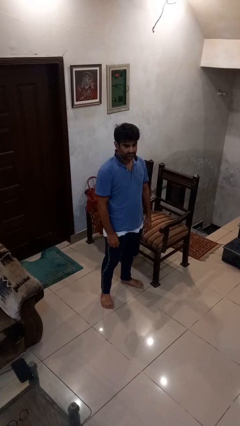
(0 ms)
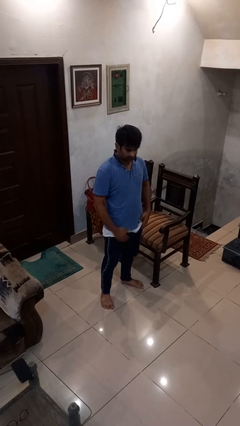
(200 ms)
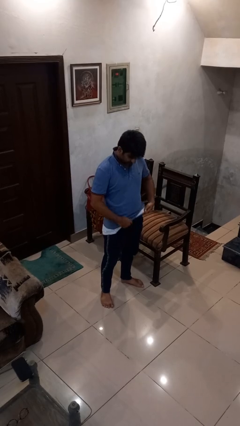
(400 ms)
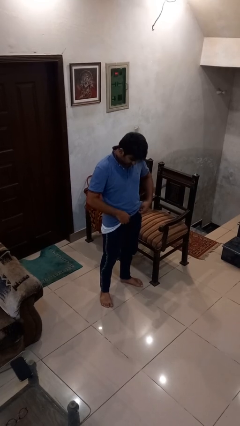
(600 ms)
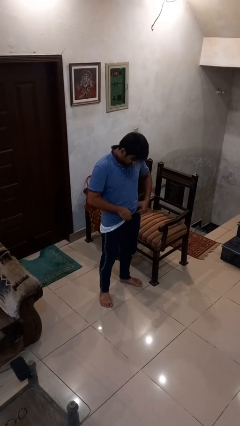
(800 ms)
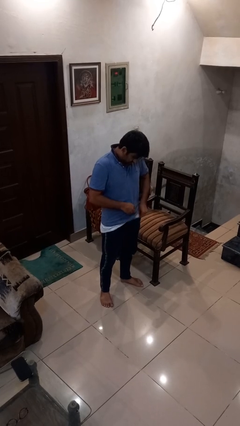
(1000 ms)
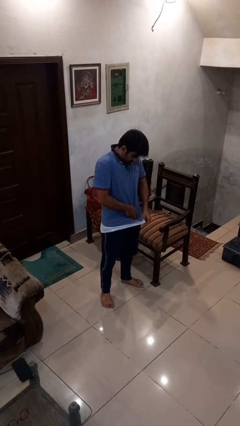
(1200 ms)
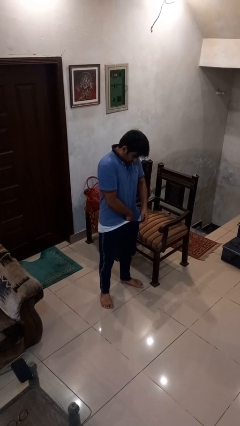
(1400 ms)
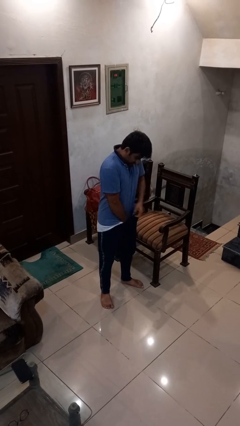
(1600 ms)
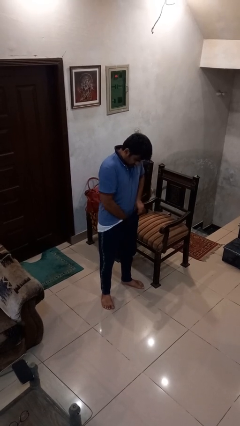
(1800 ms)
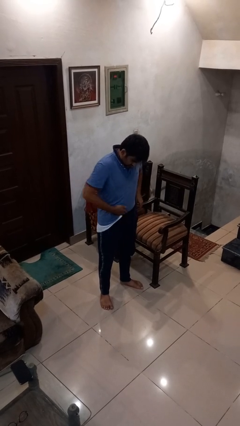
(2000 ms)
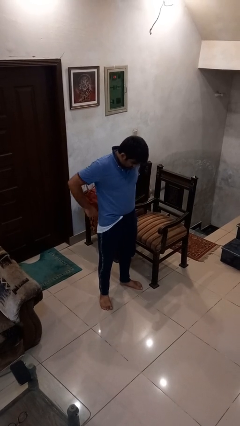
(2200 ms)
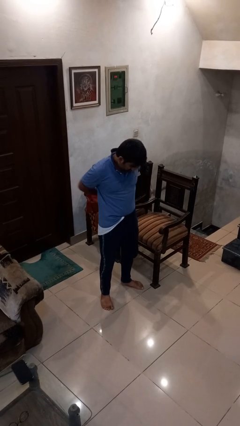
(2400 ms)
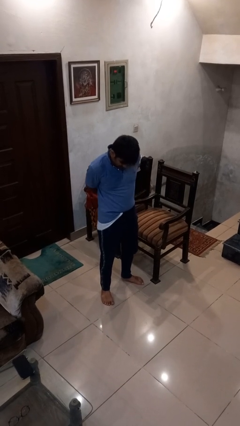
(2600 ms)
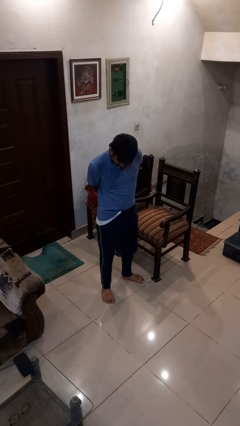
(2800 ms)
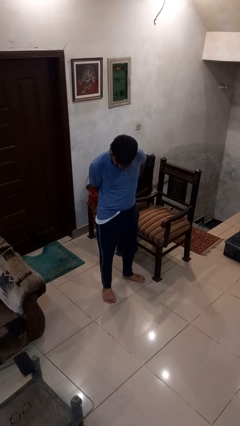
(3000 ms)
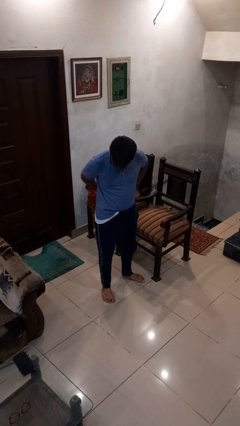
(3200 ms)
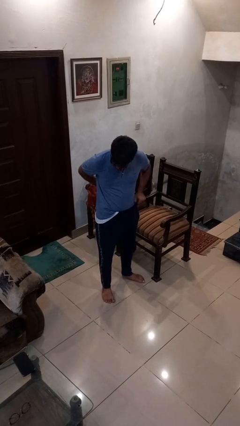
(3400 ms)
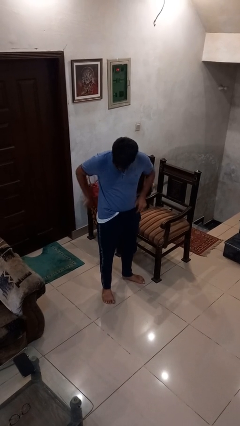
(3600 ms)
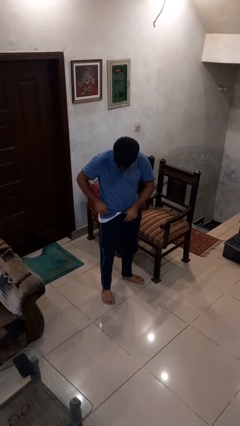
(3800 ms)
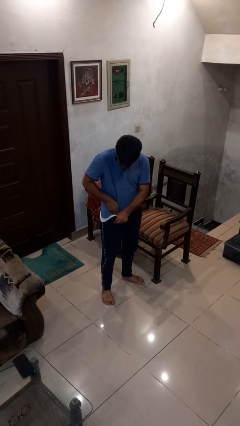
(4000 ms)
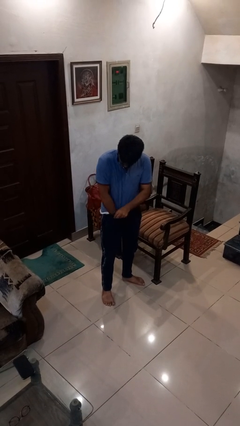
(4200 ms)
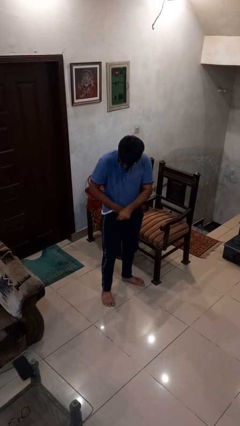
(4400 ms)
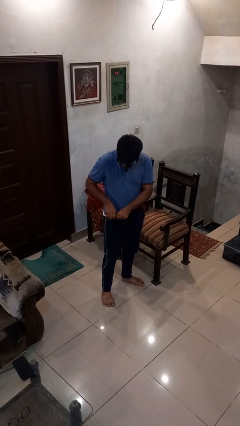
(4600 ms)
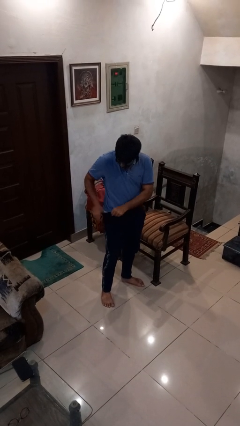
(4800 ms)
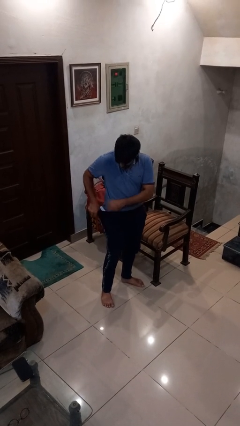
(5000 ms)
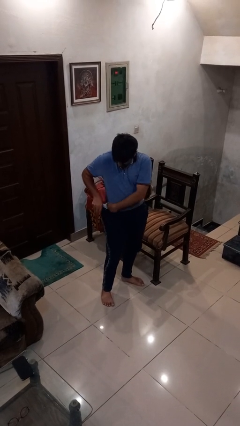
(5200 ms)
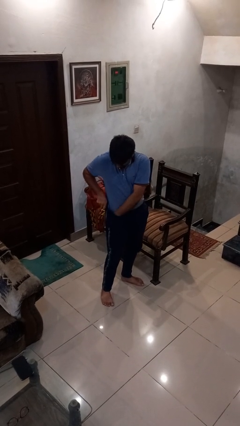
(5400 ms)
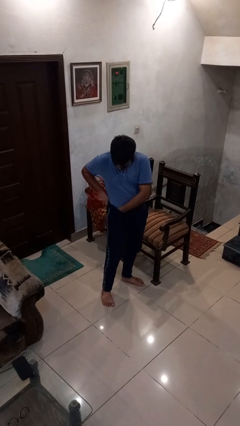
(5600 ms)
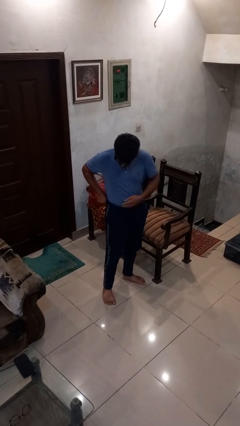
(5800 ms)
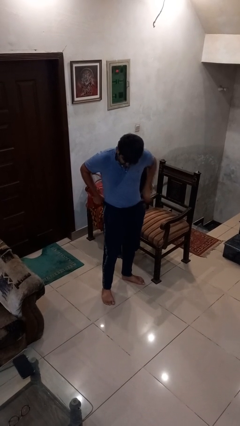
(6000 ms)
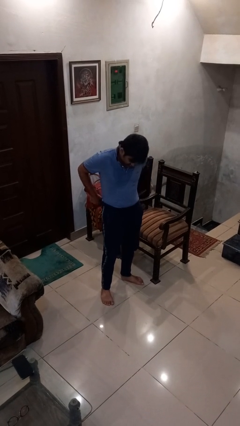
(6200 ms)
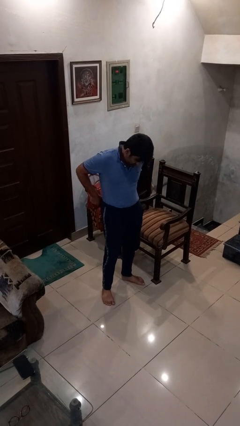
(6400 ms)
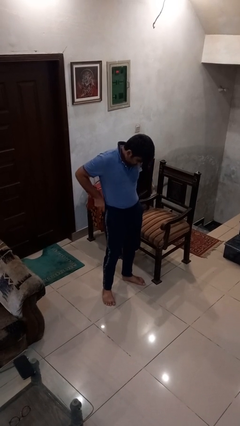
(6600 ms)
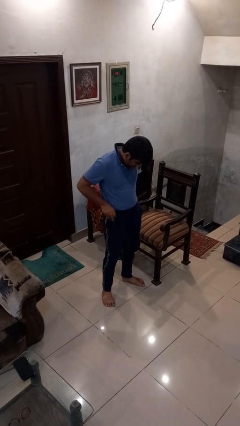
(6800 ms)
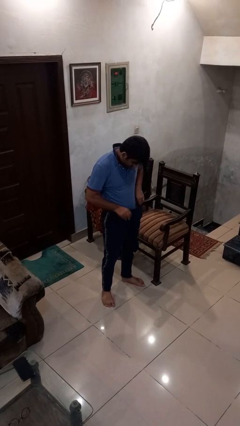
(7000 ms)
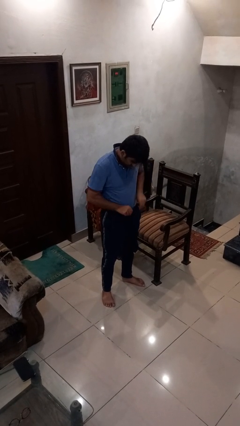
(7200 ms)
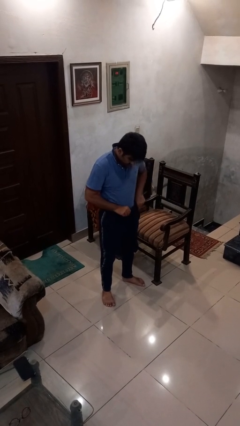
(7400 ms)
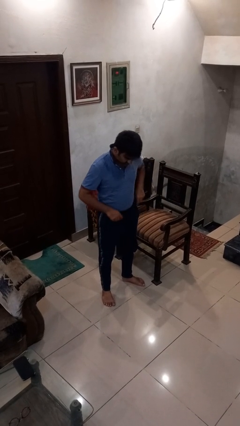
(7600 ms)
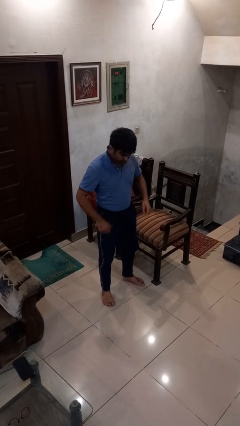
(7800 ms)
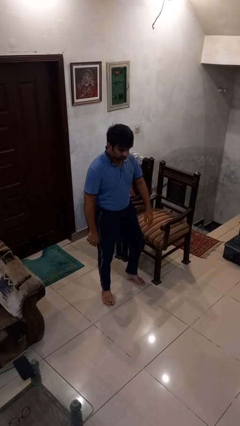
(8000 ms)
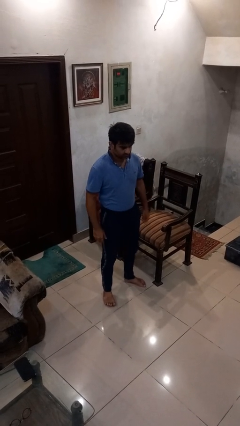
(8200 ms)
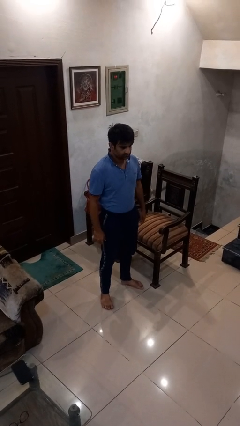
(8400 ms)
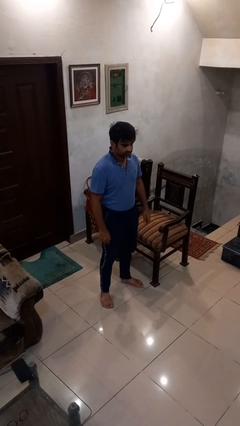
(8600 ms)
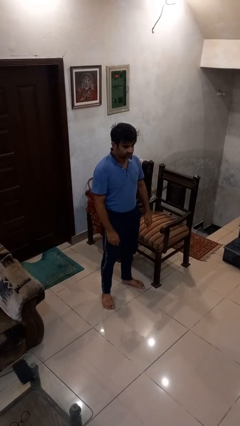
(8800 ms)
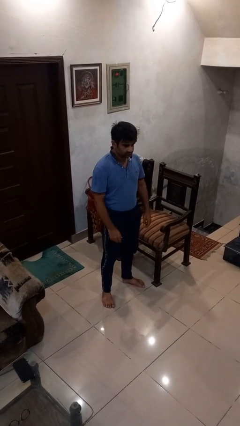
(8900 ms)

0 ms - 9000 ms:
person tucks in shirt

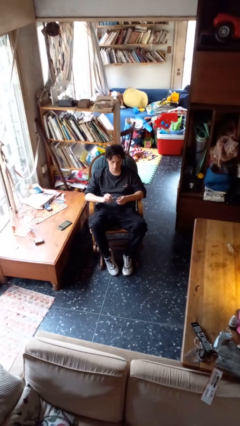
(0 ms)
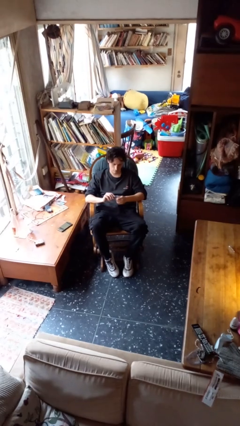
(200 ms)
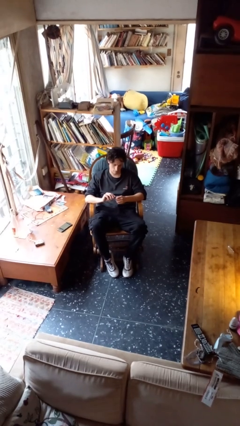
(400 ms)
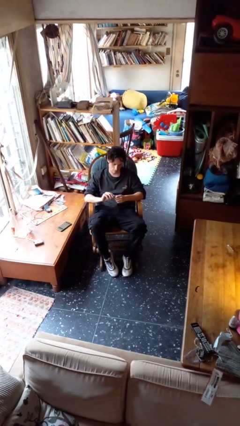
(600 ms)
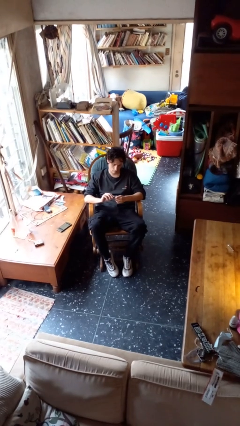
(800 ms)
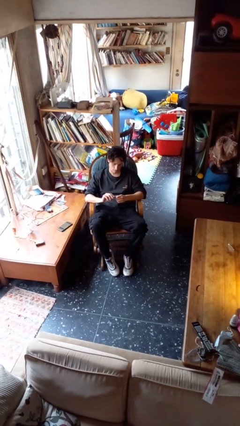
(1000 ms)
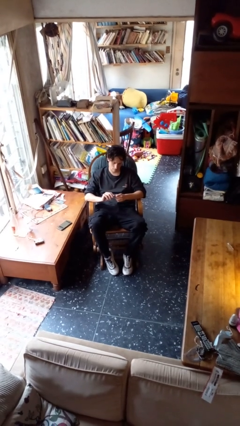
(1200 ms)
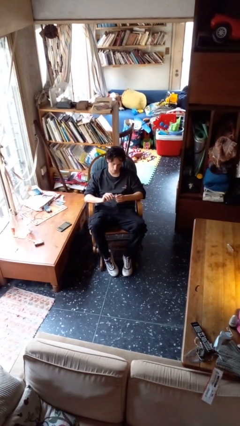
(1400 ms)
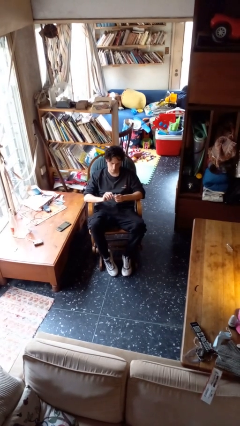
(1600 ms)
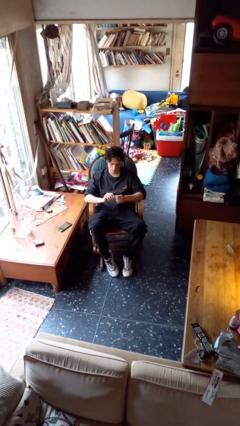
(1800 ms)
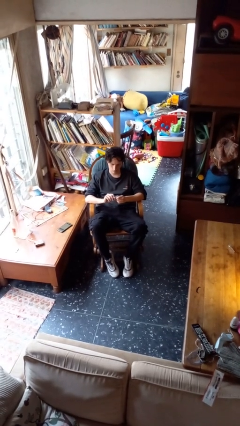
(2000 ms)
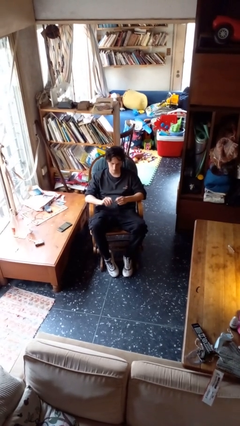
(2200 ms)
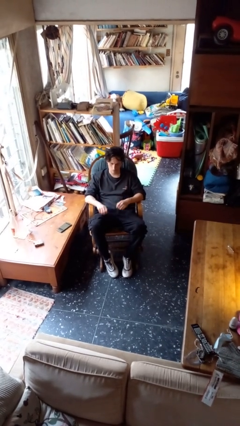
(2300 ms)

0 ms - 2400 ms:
person files fingernails

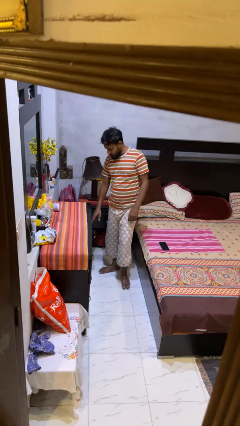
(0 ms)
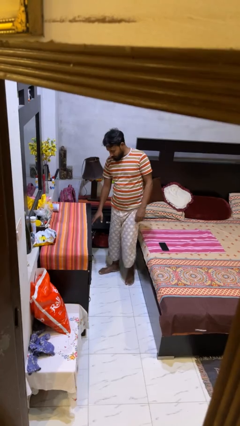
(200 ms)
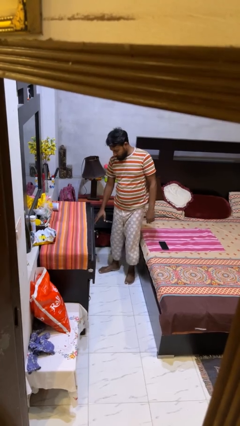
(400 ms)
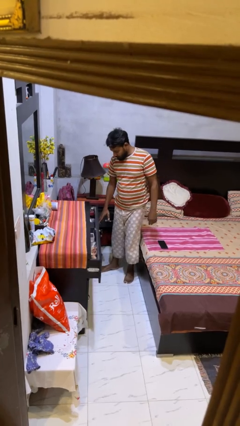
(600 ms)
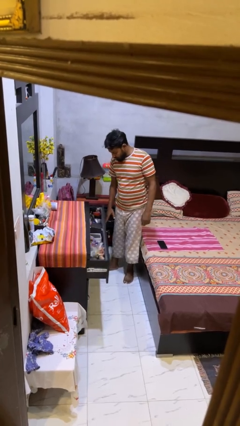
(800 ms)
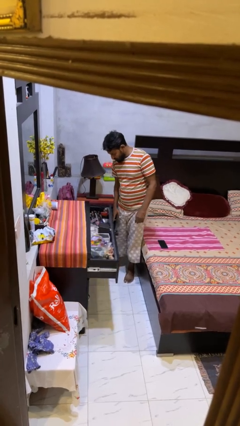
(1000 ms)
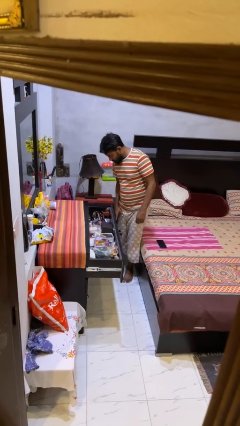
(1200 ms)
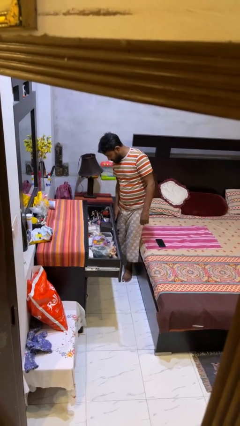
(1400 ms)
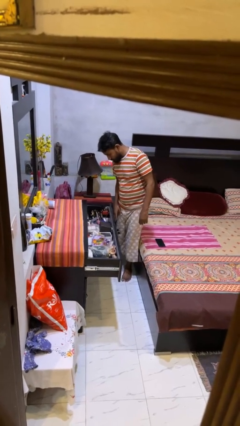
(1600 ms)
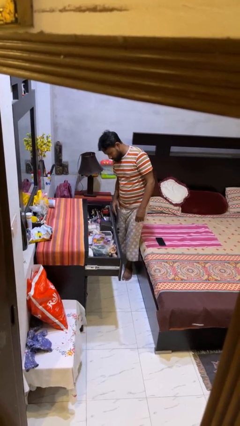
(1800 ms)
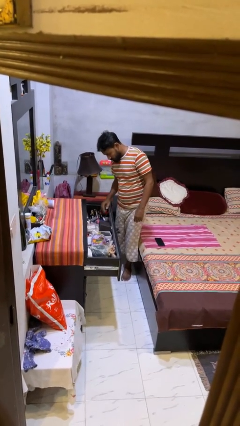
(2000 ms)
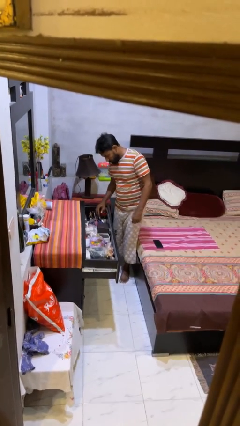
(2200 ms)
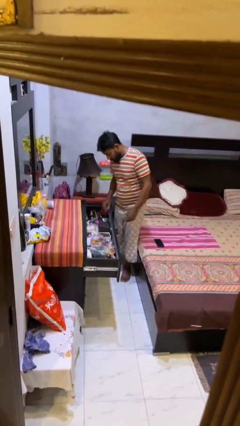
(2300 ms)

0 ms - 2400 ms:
person opens dresser drawer

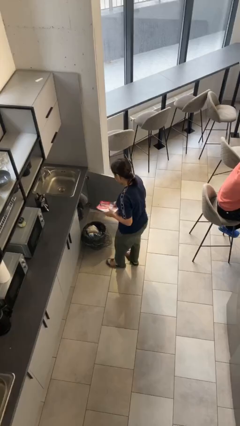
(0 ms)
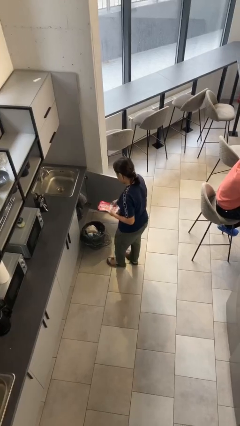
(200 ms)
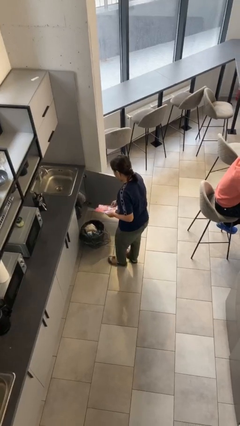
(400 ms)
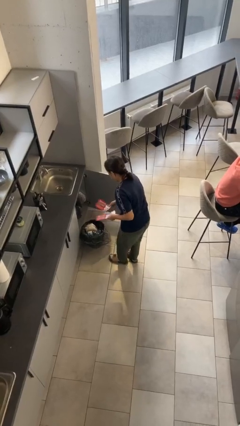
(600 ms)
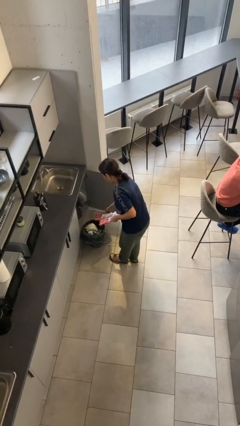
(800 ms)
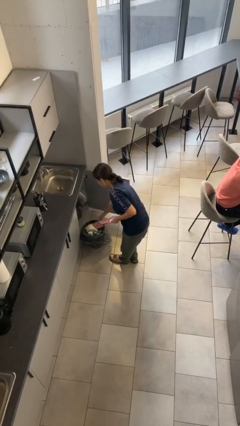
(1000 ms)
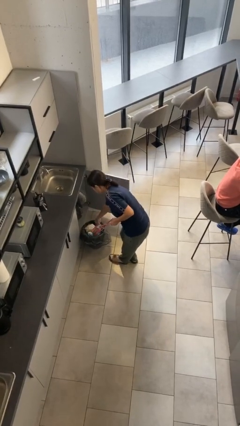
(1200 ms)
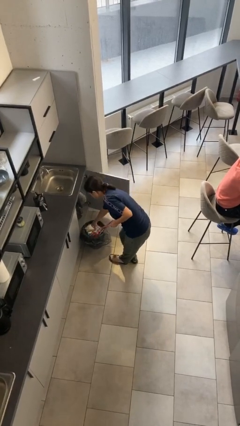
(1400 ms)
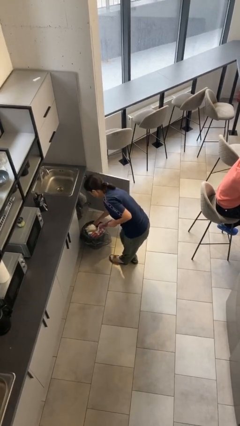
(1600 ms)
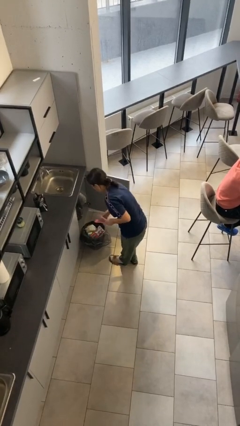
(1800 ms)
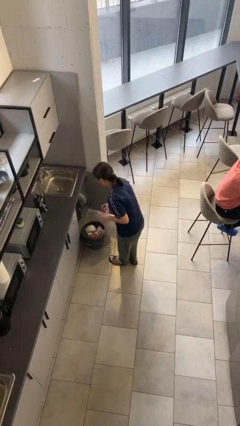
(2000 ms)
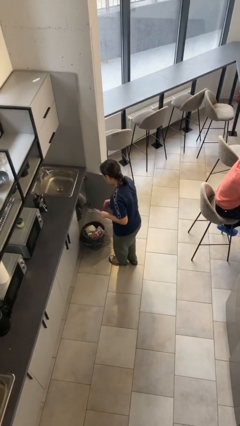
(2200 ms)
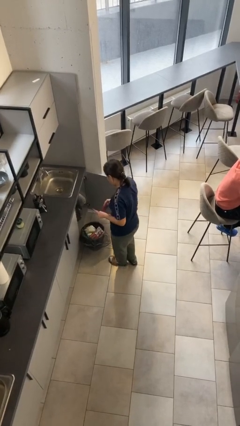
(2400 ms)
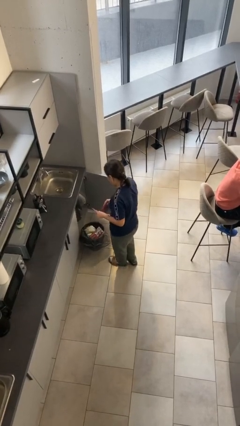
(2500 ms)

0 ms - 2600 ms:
person discards trash

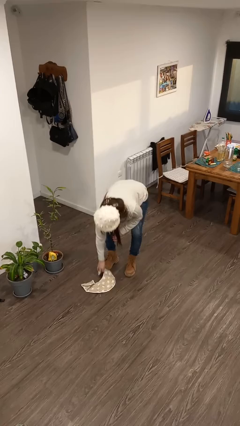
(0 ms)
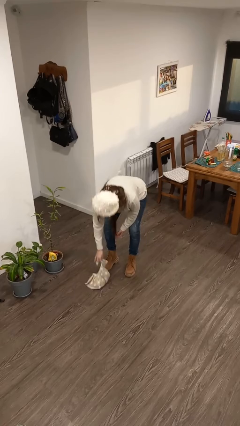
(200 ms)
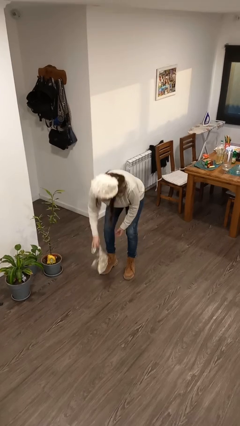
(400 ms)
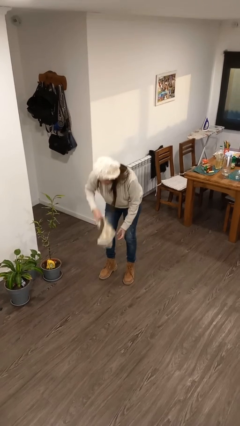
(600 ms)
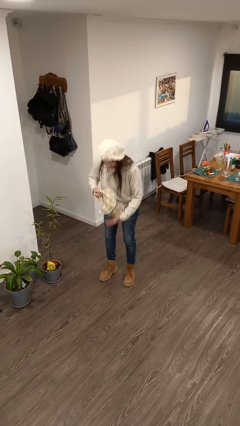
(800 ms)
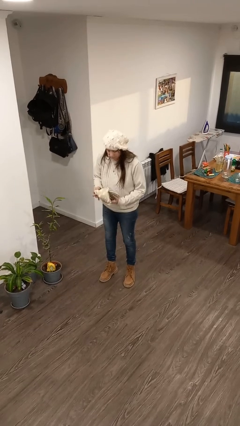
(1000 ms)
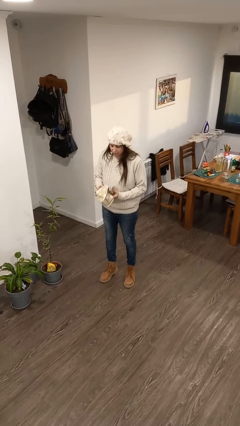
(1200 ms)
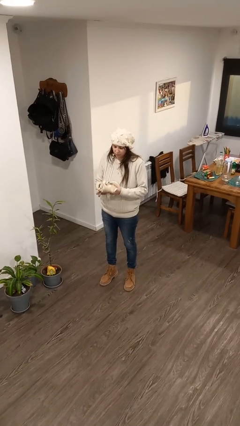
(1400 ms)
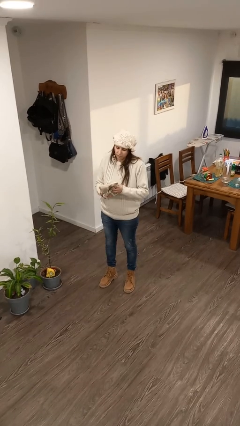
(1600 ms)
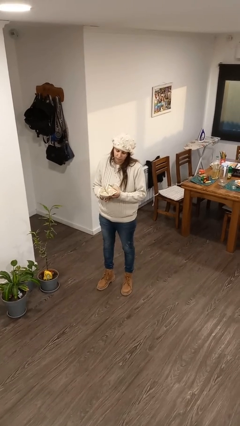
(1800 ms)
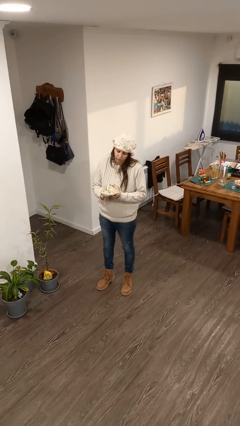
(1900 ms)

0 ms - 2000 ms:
person picks up object from floor
